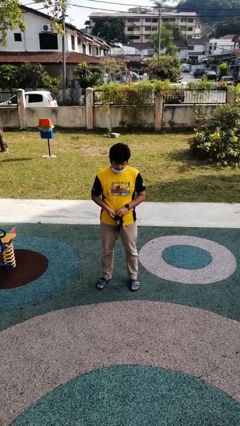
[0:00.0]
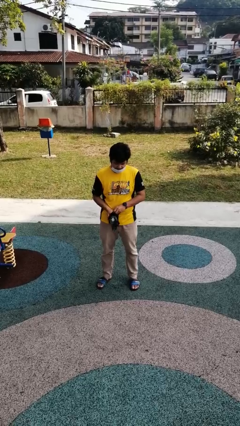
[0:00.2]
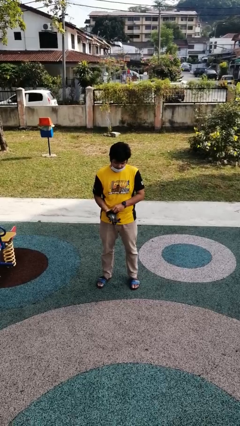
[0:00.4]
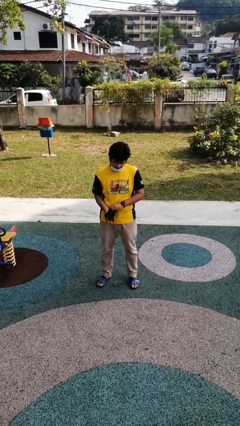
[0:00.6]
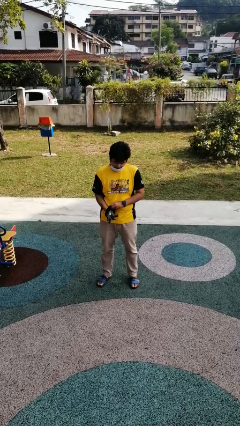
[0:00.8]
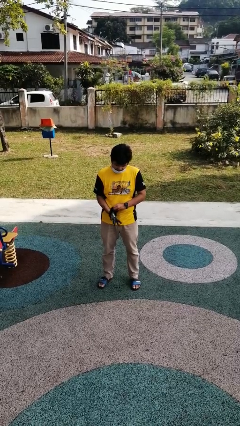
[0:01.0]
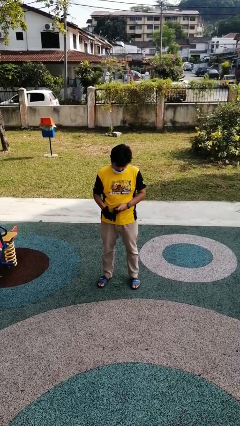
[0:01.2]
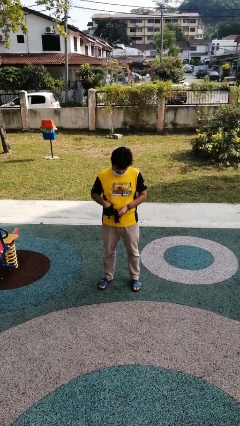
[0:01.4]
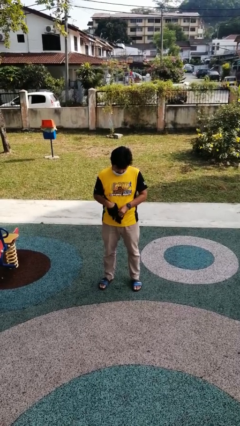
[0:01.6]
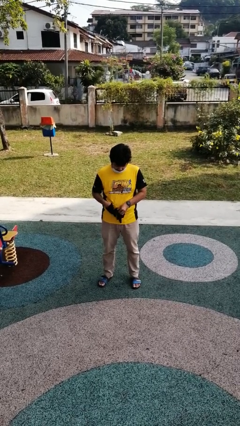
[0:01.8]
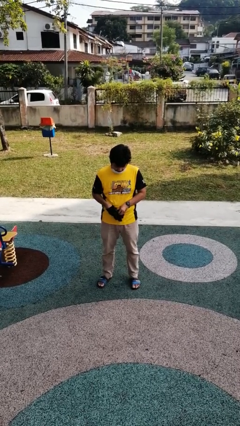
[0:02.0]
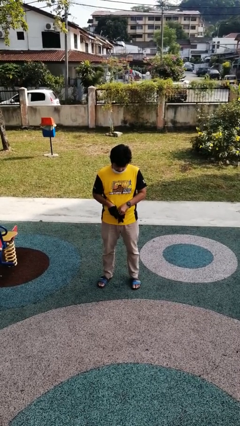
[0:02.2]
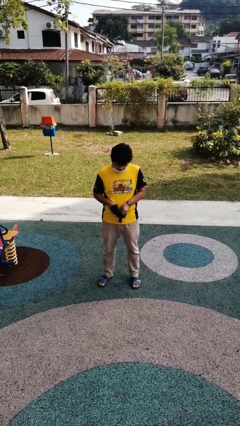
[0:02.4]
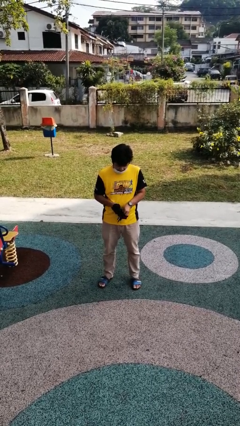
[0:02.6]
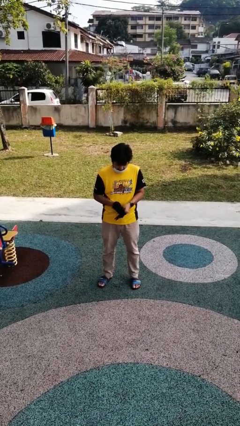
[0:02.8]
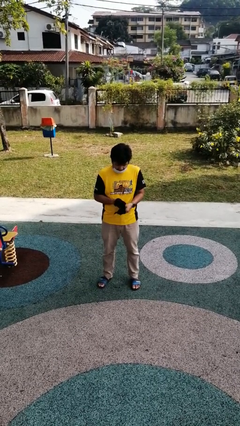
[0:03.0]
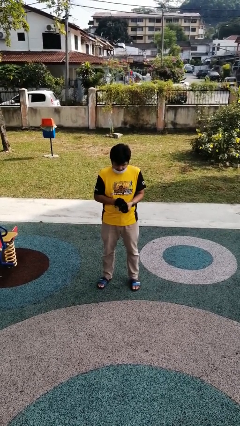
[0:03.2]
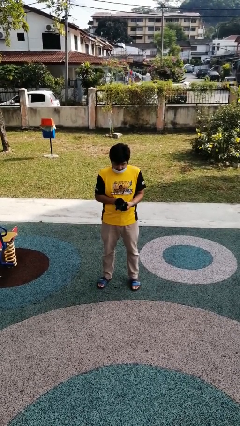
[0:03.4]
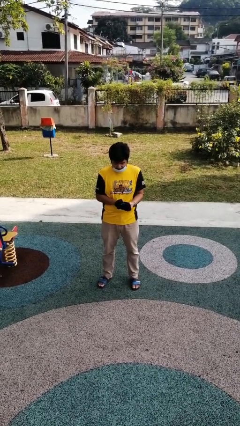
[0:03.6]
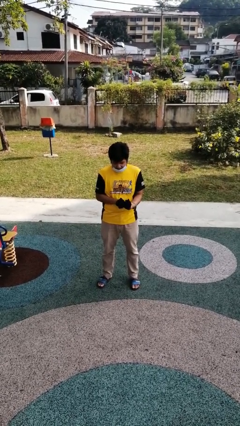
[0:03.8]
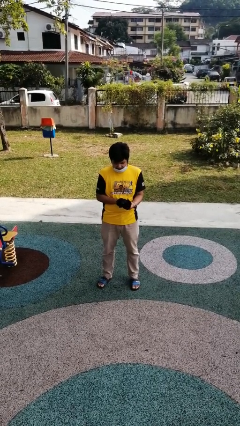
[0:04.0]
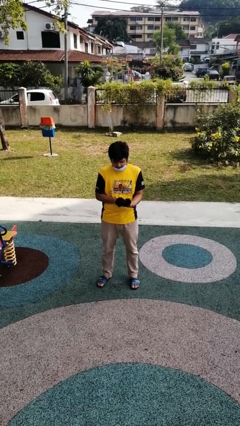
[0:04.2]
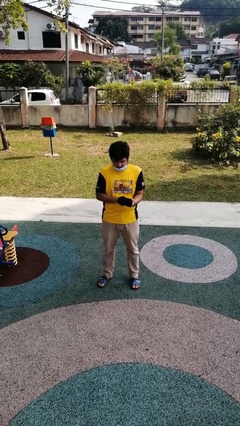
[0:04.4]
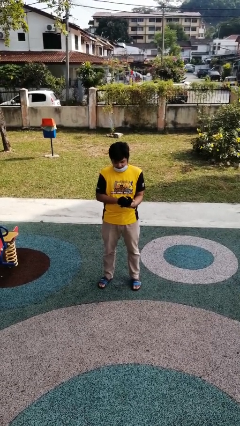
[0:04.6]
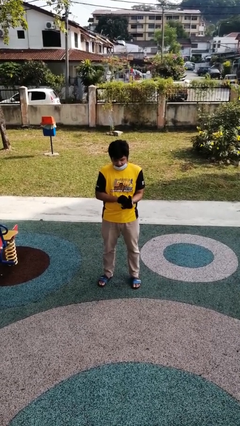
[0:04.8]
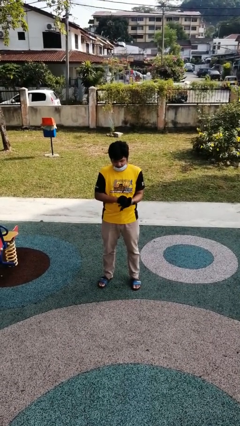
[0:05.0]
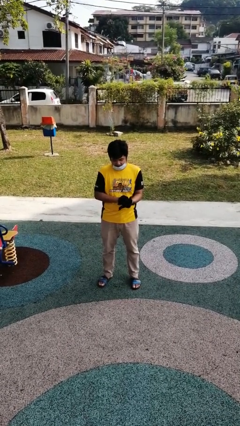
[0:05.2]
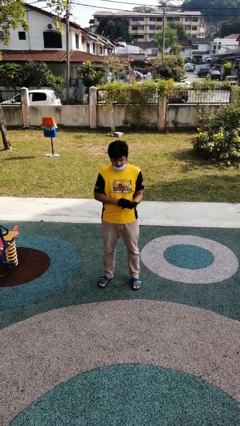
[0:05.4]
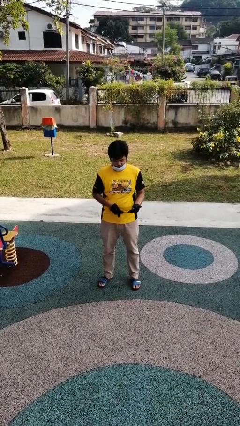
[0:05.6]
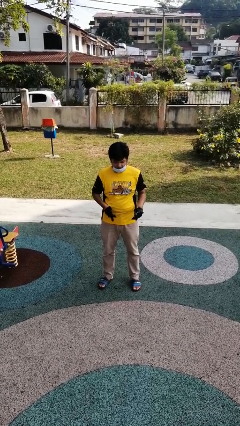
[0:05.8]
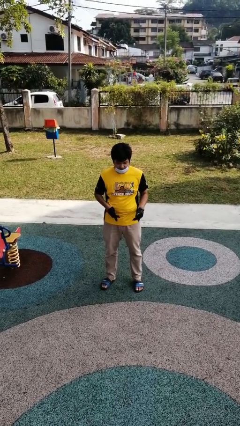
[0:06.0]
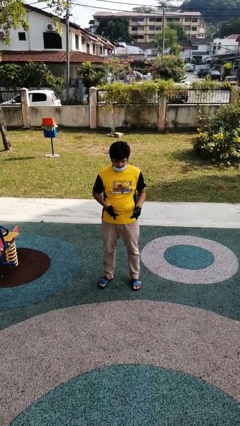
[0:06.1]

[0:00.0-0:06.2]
person puts on gloves

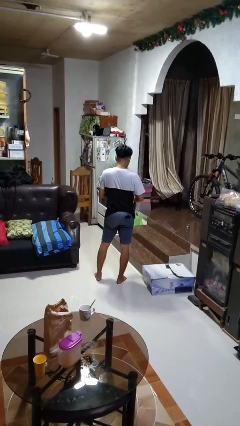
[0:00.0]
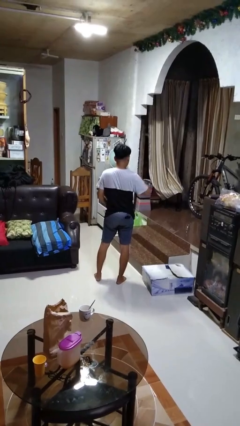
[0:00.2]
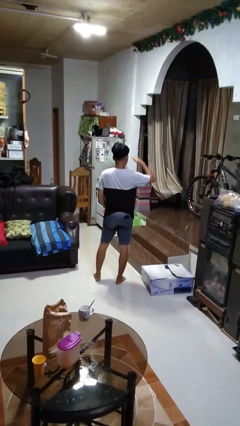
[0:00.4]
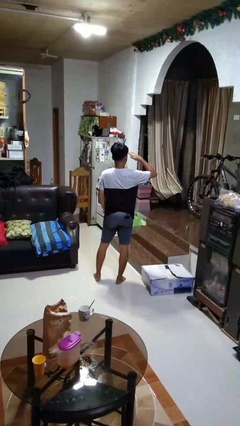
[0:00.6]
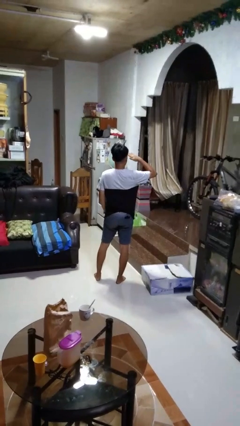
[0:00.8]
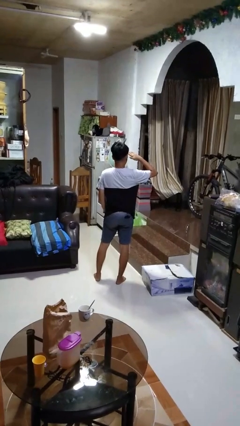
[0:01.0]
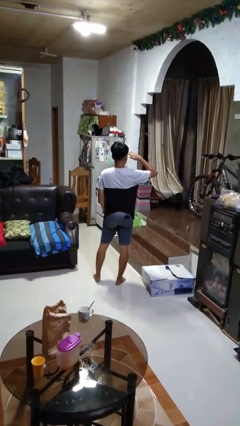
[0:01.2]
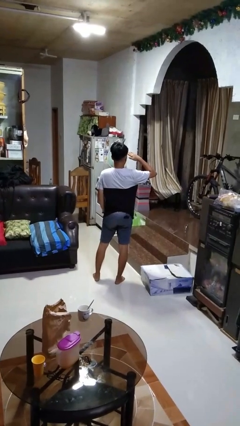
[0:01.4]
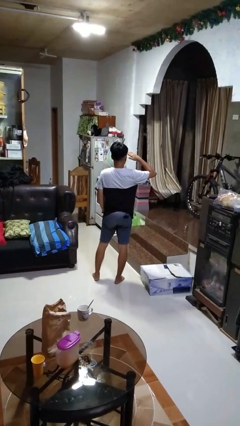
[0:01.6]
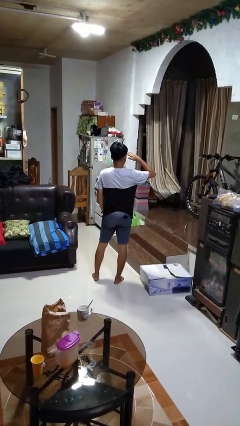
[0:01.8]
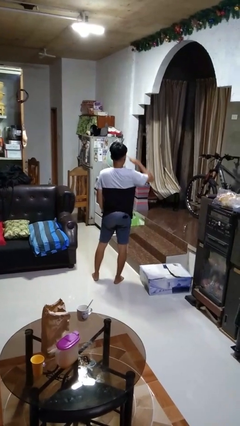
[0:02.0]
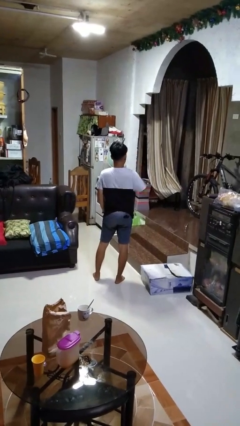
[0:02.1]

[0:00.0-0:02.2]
person salutes

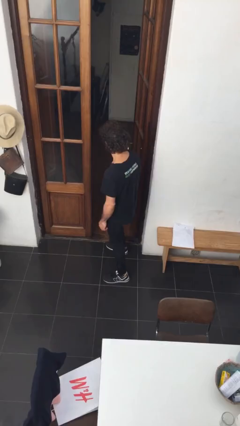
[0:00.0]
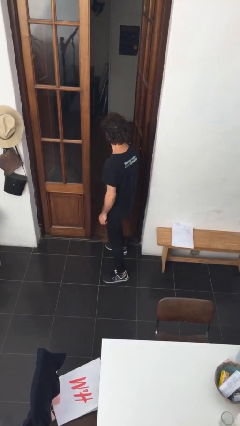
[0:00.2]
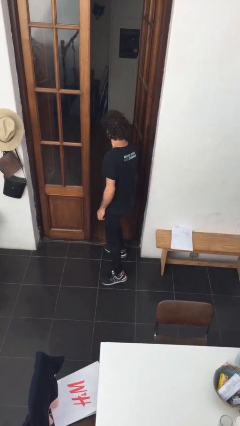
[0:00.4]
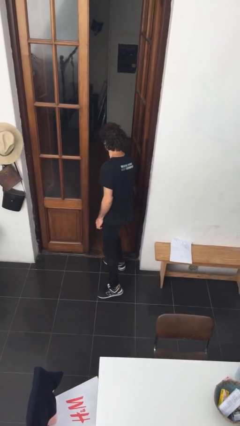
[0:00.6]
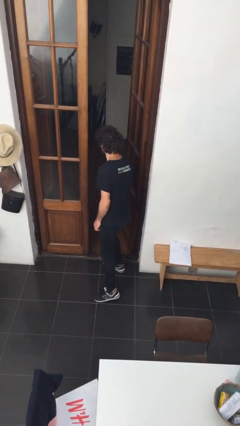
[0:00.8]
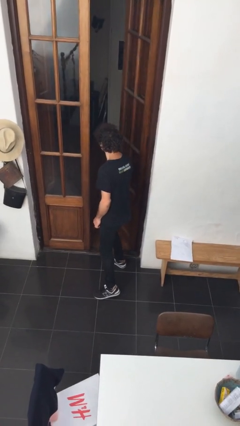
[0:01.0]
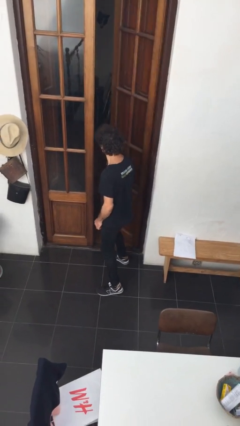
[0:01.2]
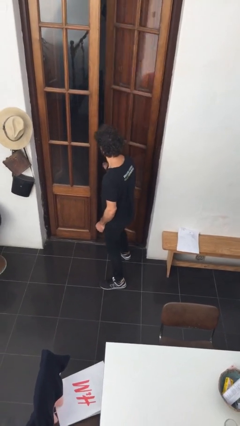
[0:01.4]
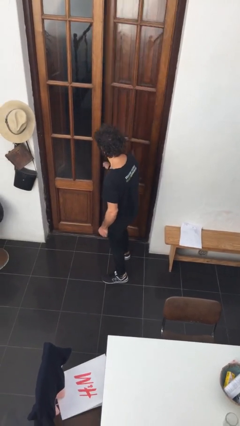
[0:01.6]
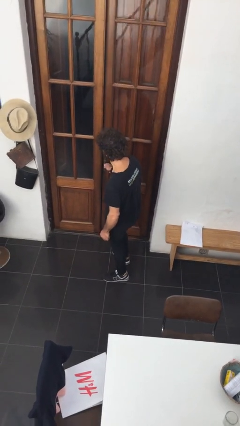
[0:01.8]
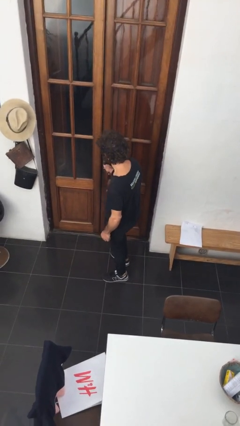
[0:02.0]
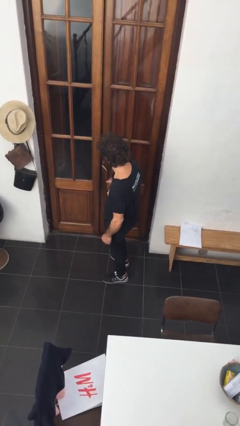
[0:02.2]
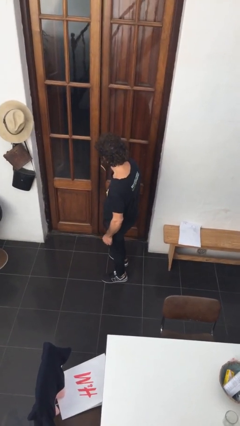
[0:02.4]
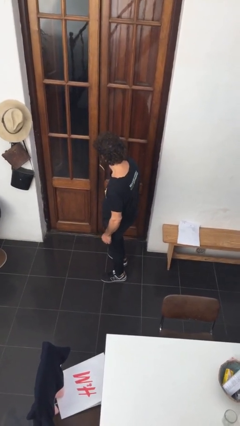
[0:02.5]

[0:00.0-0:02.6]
person closes facility door

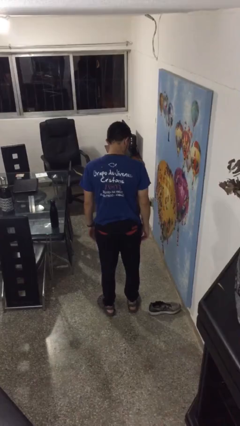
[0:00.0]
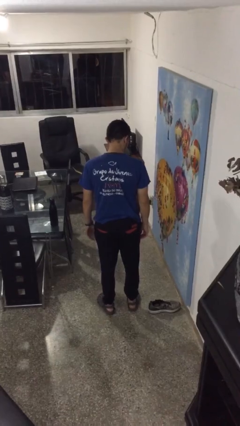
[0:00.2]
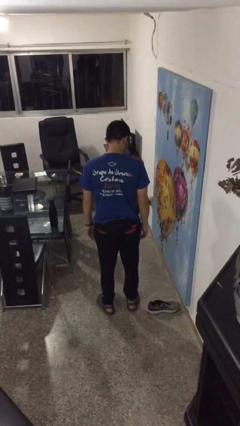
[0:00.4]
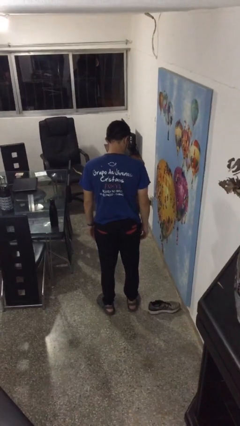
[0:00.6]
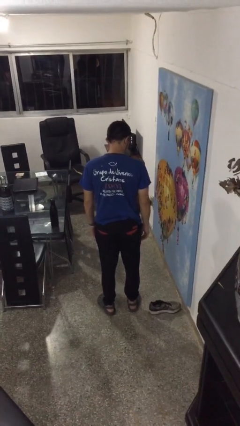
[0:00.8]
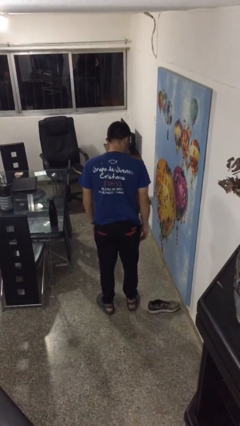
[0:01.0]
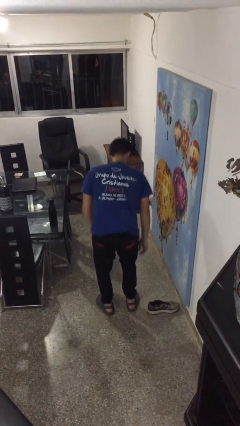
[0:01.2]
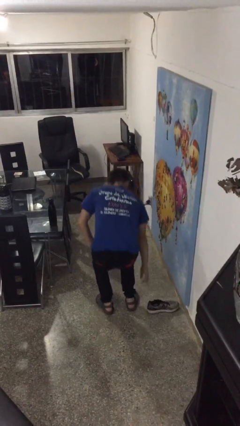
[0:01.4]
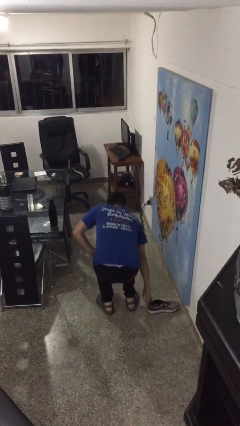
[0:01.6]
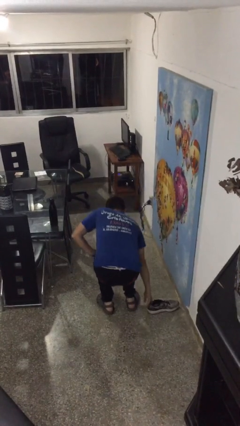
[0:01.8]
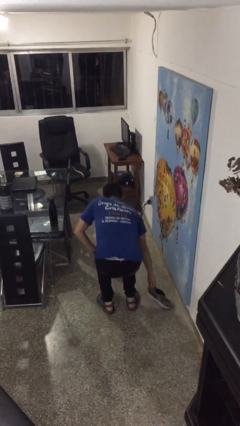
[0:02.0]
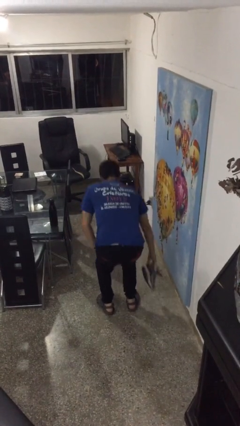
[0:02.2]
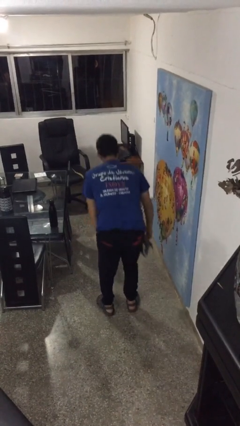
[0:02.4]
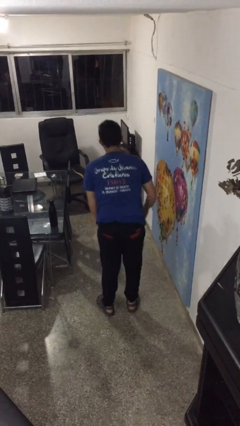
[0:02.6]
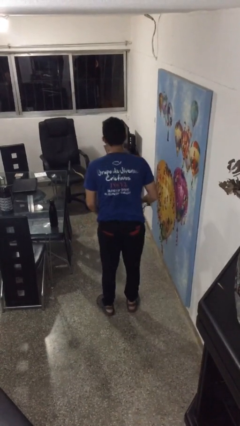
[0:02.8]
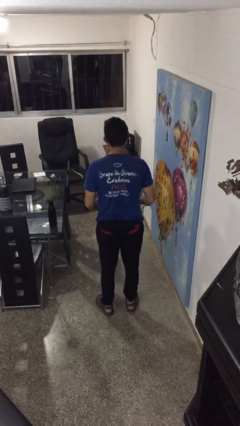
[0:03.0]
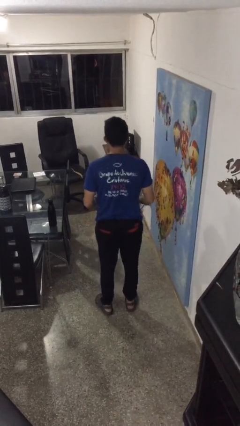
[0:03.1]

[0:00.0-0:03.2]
person picks up object from floor

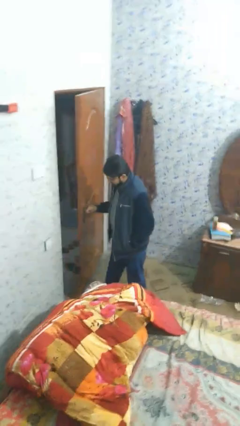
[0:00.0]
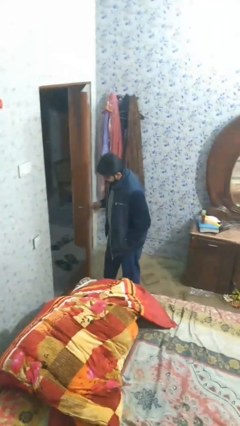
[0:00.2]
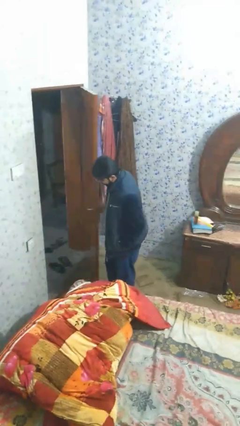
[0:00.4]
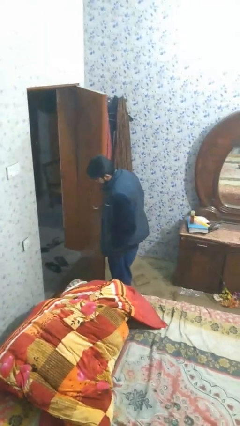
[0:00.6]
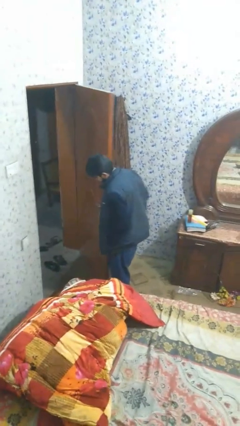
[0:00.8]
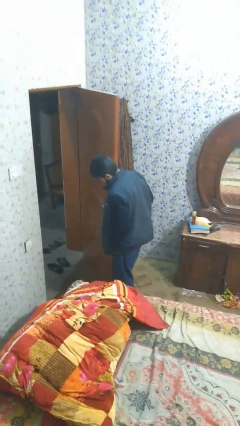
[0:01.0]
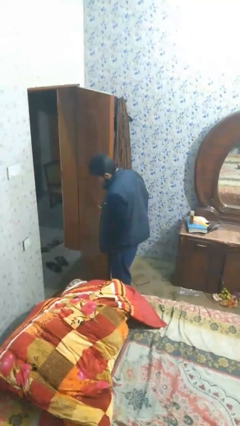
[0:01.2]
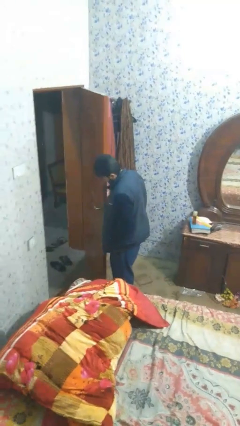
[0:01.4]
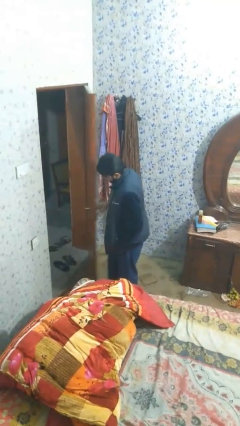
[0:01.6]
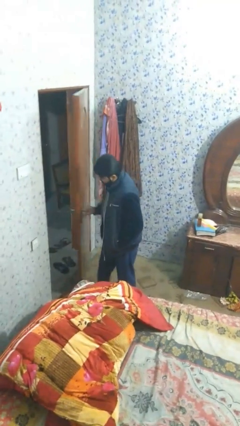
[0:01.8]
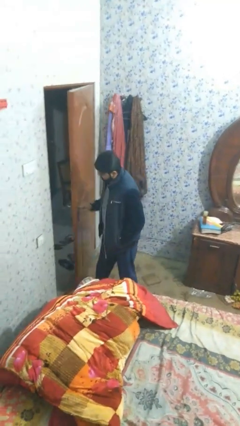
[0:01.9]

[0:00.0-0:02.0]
person opens facility door

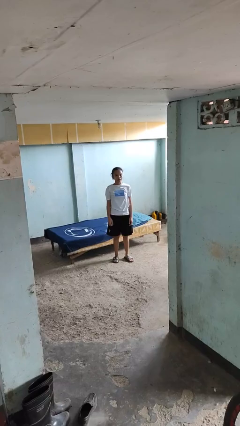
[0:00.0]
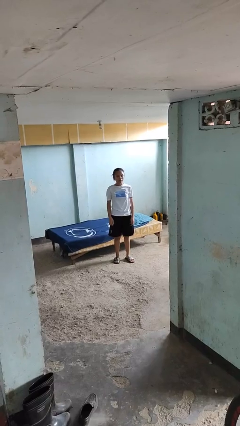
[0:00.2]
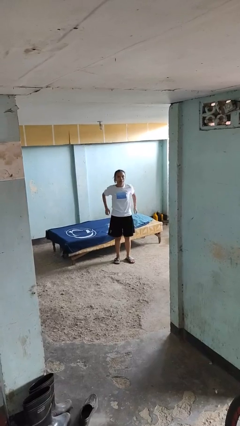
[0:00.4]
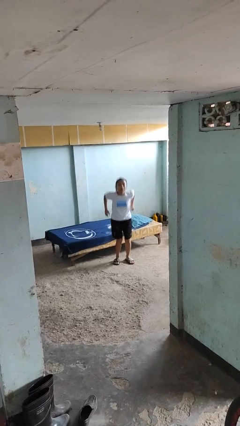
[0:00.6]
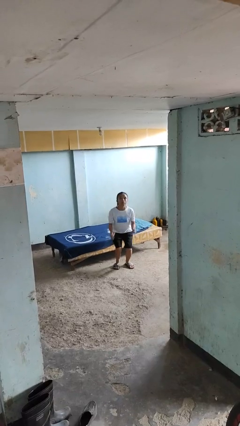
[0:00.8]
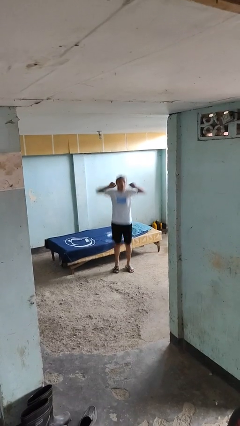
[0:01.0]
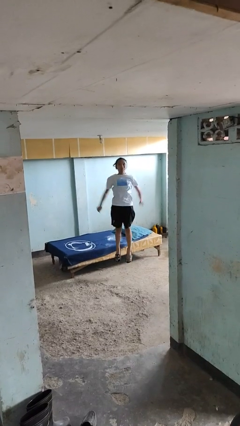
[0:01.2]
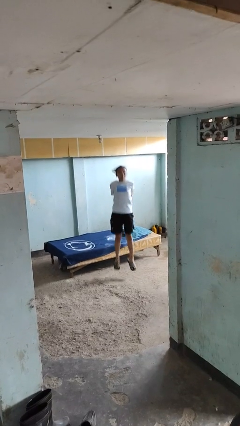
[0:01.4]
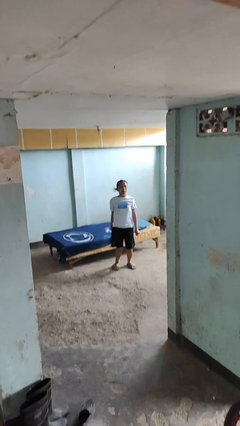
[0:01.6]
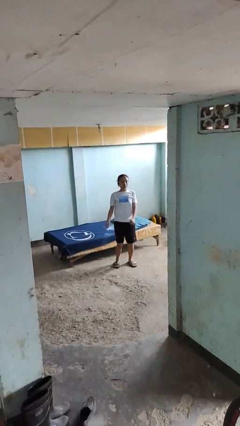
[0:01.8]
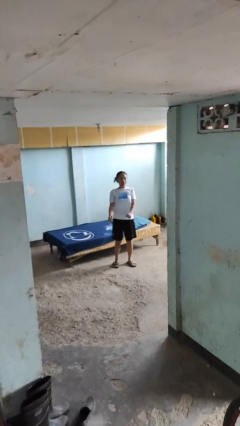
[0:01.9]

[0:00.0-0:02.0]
person jumps
